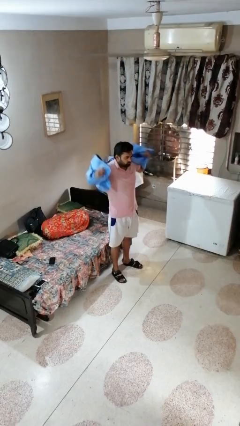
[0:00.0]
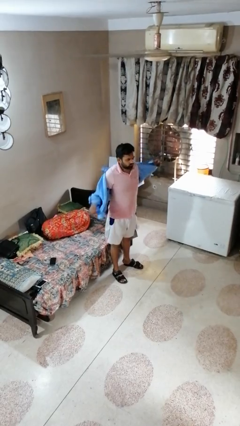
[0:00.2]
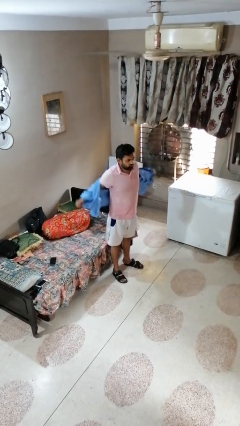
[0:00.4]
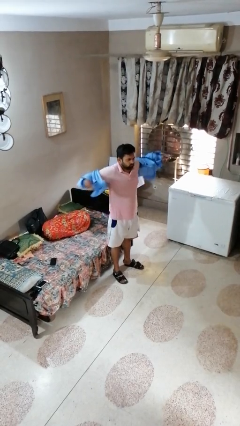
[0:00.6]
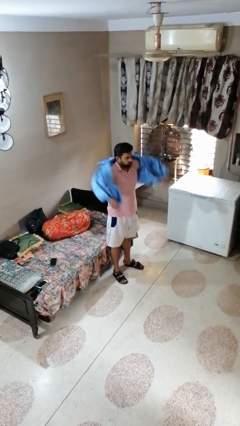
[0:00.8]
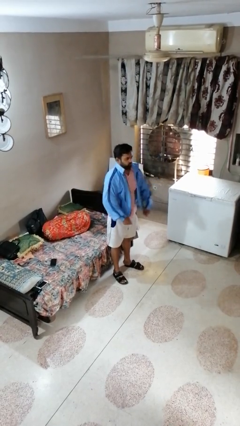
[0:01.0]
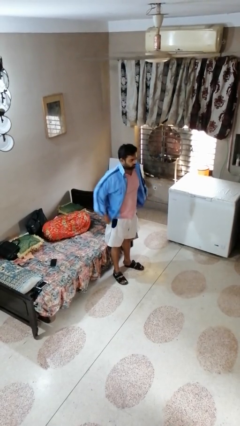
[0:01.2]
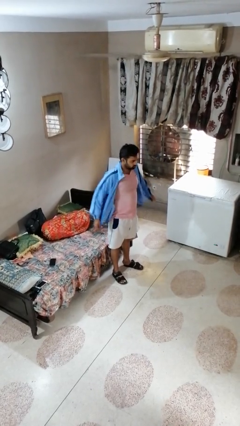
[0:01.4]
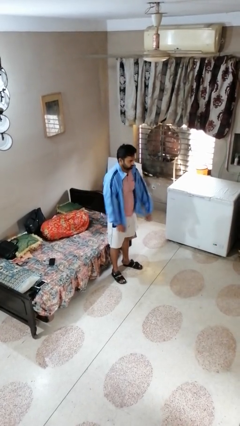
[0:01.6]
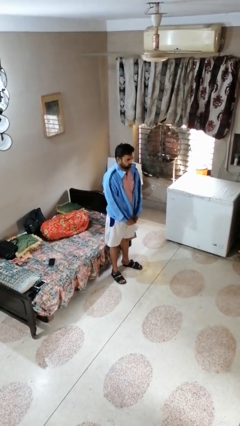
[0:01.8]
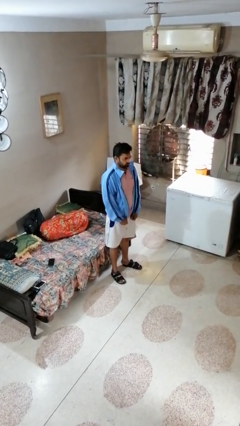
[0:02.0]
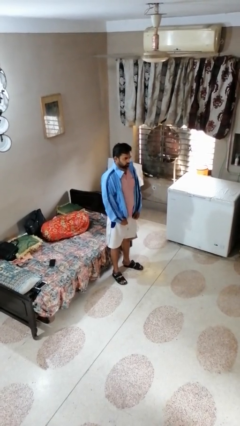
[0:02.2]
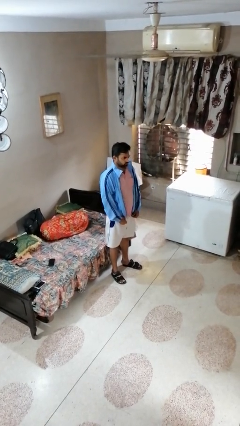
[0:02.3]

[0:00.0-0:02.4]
person puts on jacket

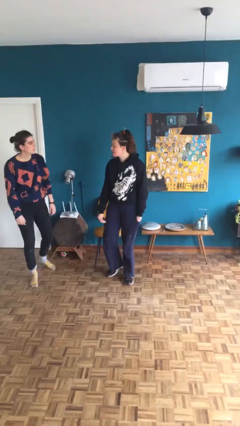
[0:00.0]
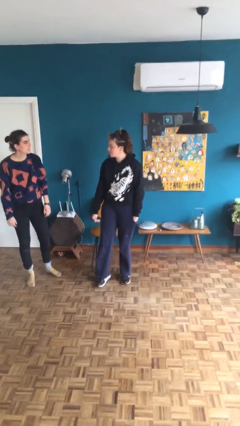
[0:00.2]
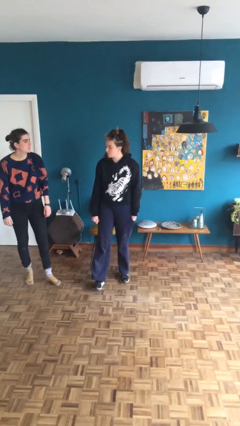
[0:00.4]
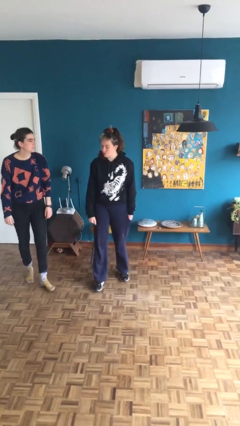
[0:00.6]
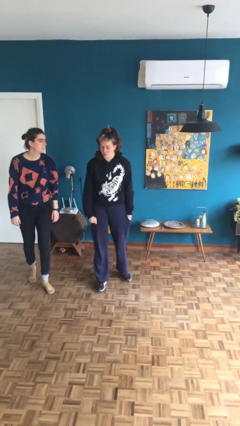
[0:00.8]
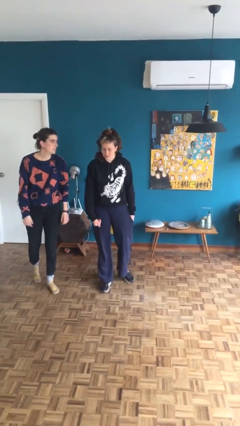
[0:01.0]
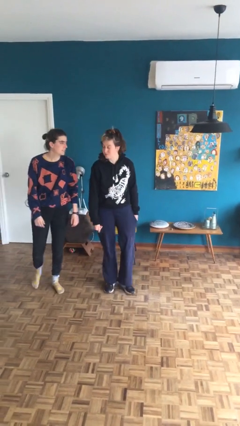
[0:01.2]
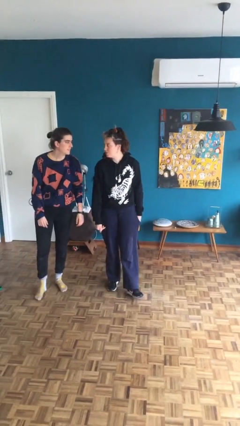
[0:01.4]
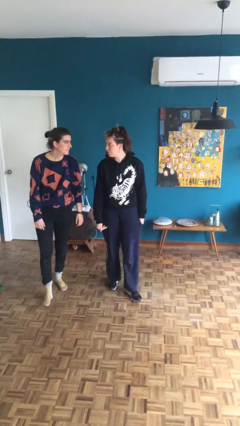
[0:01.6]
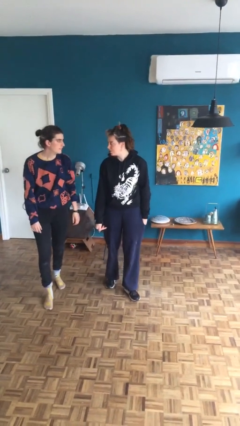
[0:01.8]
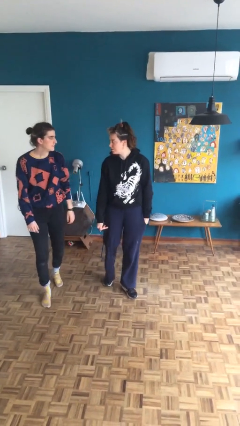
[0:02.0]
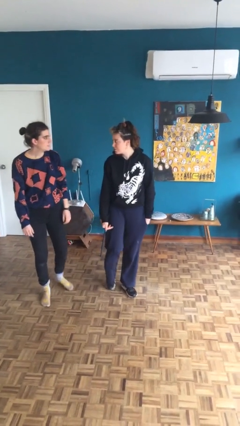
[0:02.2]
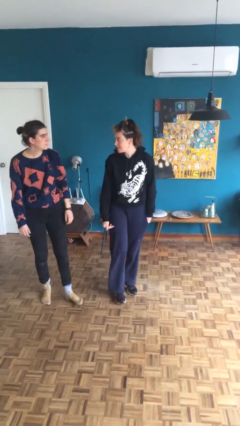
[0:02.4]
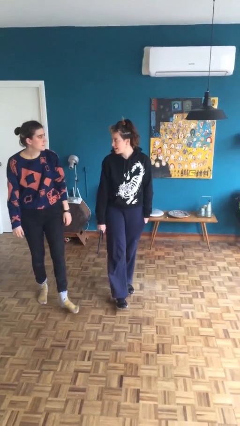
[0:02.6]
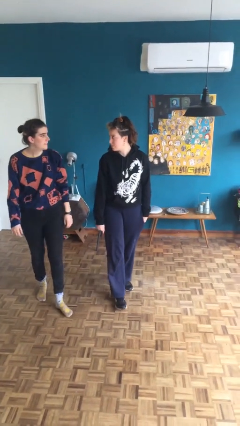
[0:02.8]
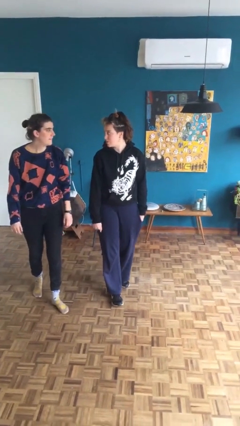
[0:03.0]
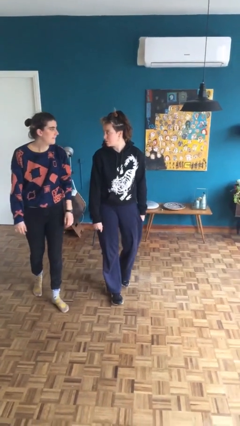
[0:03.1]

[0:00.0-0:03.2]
person talks to person

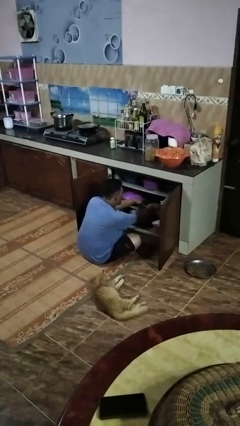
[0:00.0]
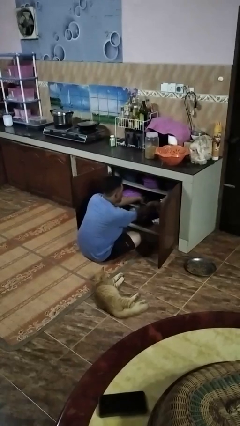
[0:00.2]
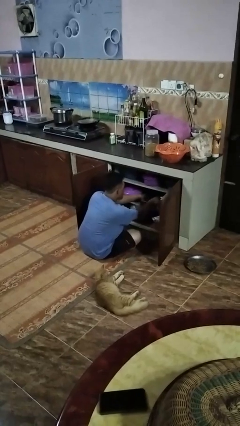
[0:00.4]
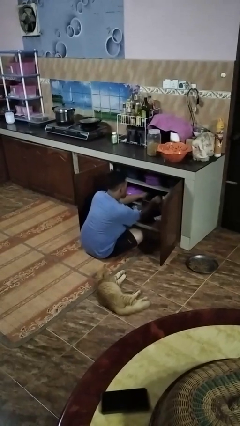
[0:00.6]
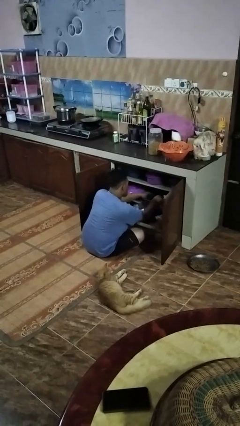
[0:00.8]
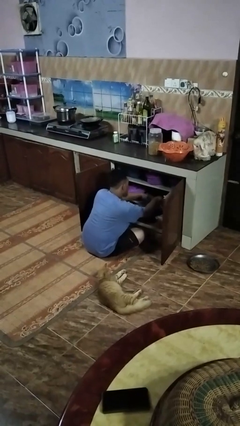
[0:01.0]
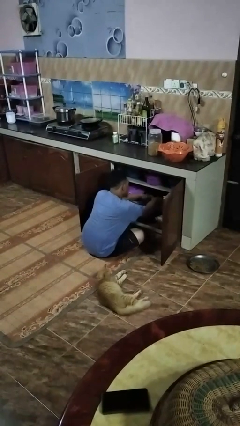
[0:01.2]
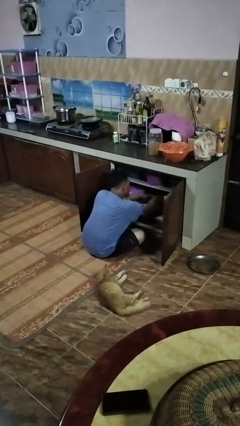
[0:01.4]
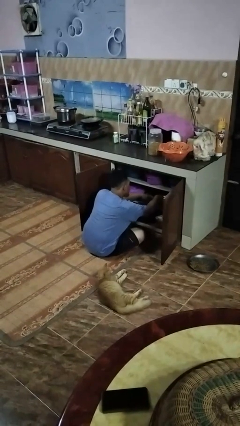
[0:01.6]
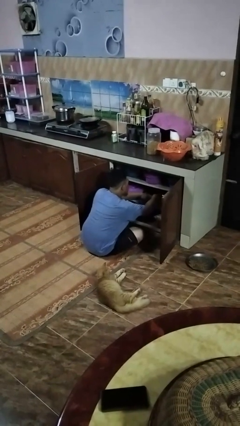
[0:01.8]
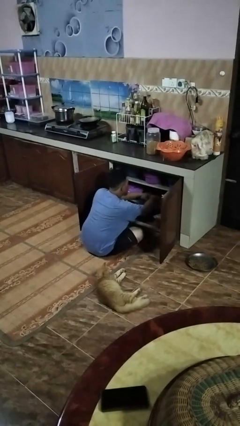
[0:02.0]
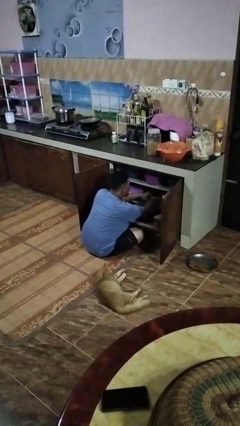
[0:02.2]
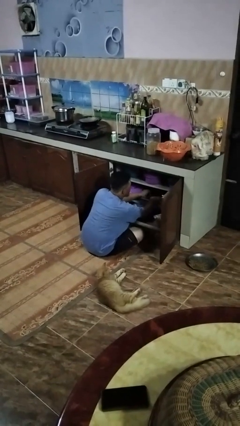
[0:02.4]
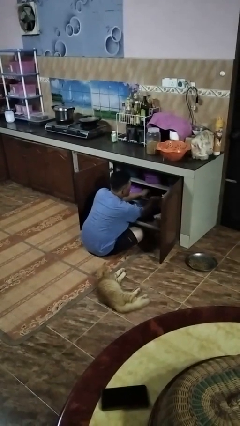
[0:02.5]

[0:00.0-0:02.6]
person searches in kitchen drawer

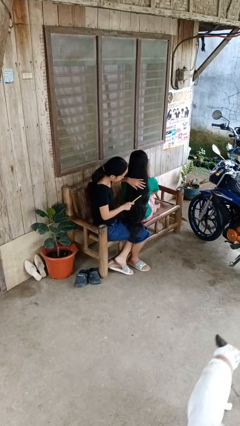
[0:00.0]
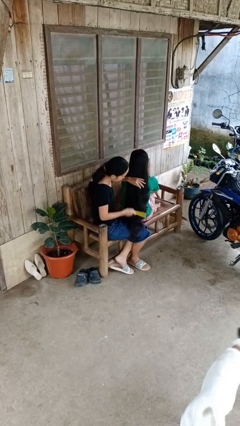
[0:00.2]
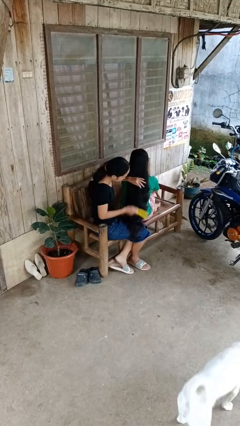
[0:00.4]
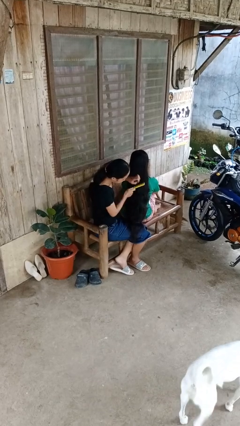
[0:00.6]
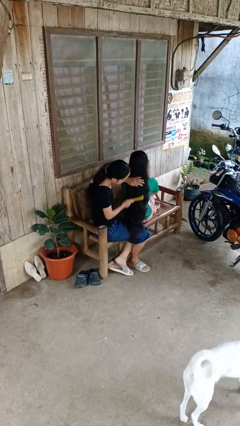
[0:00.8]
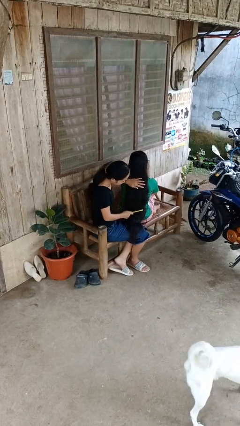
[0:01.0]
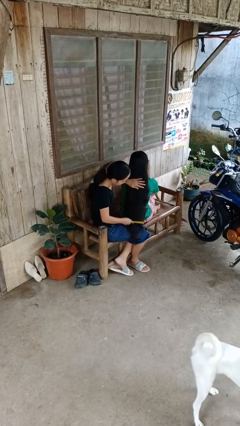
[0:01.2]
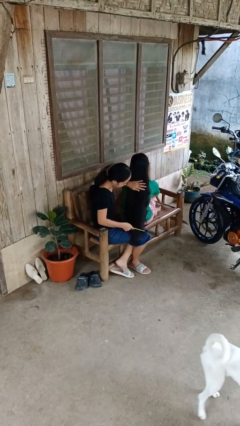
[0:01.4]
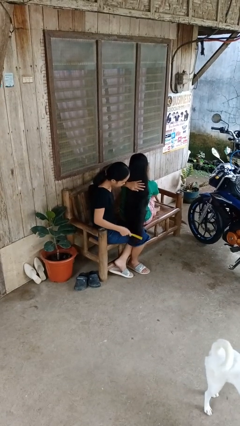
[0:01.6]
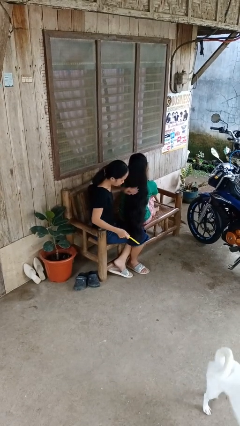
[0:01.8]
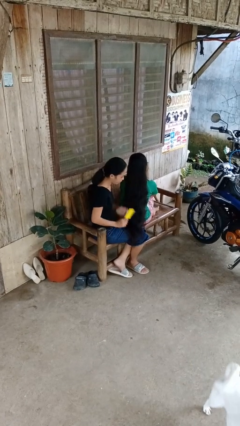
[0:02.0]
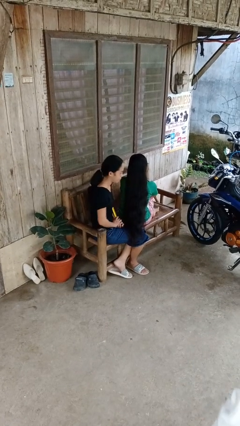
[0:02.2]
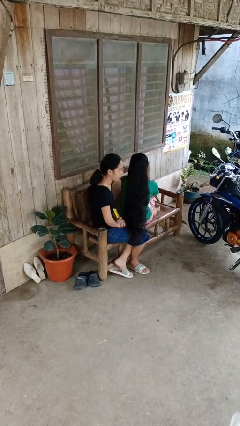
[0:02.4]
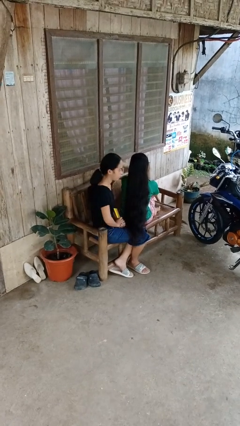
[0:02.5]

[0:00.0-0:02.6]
person brushes hair of person

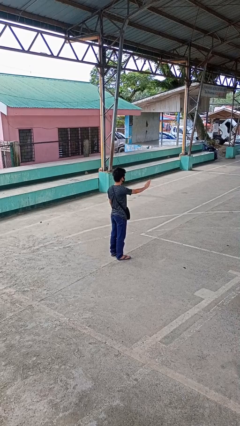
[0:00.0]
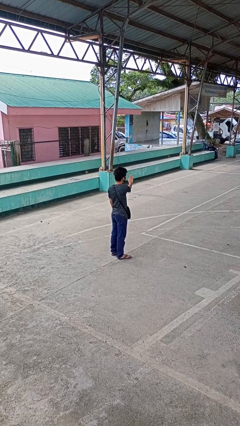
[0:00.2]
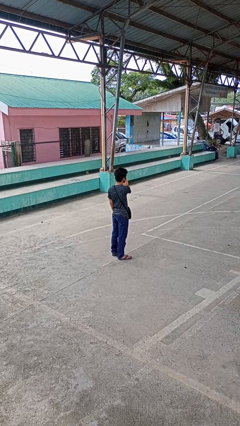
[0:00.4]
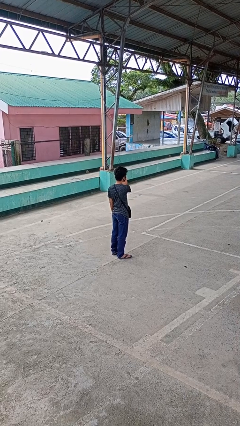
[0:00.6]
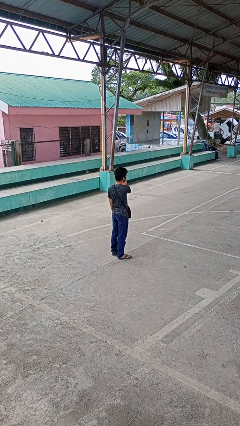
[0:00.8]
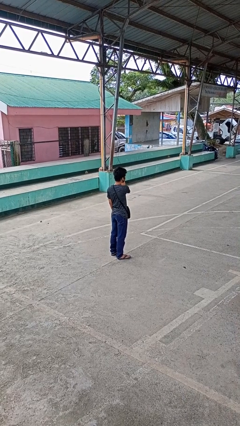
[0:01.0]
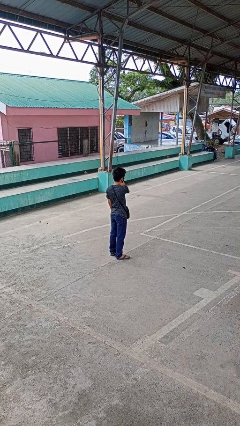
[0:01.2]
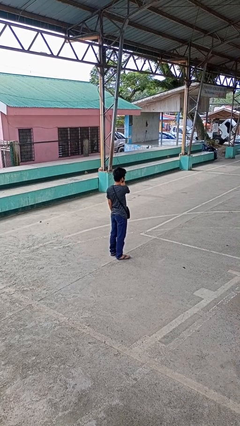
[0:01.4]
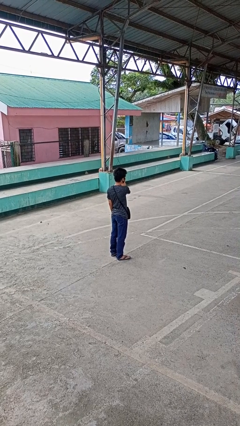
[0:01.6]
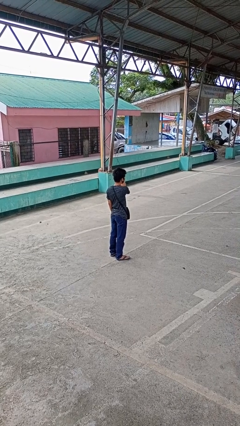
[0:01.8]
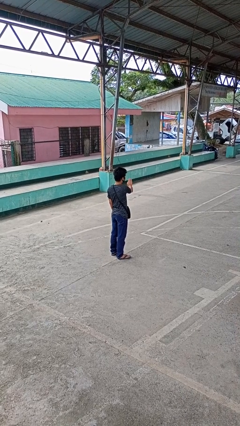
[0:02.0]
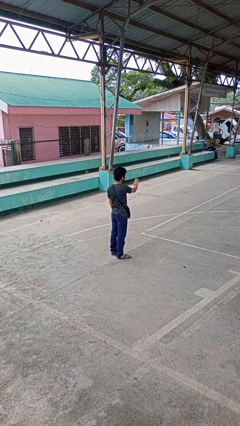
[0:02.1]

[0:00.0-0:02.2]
person gestures swipe left

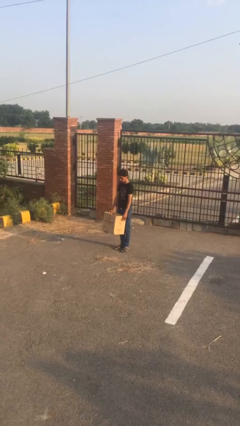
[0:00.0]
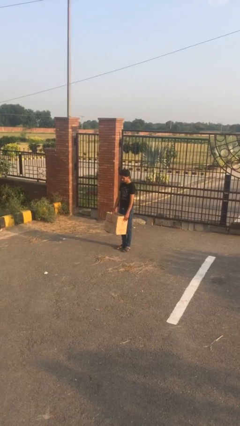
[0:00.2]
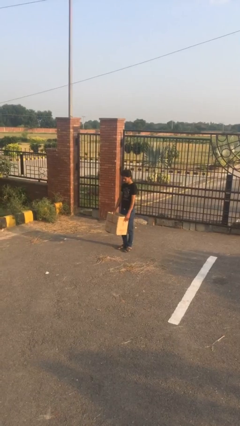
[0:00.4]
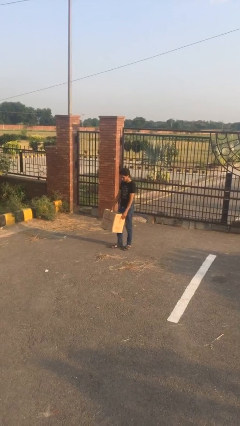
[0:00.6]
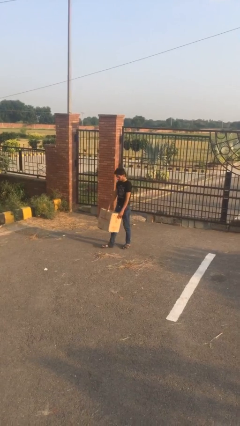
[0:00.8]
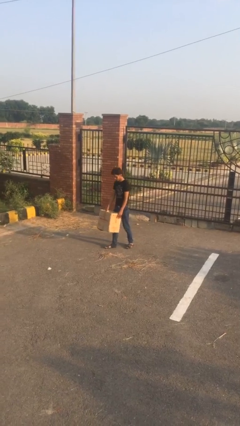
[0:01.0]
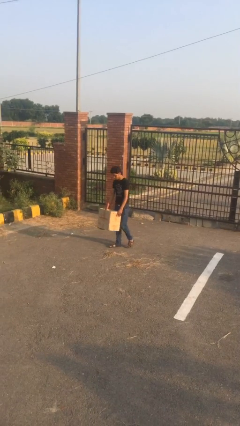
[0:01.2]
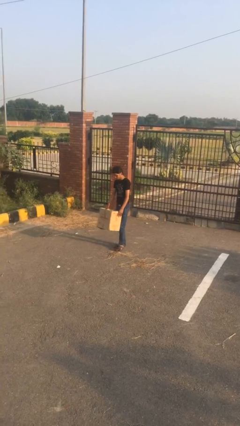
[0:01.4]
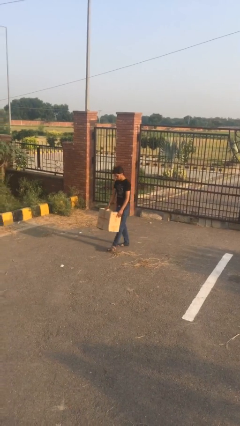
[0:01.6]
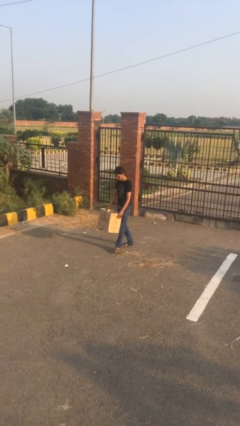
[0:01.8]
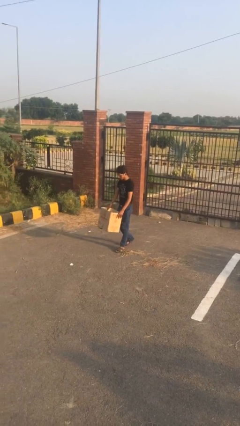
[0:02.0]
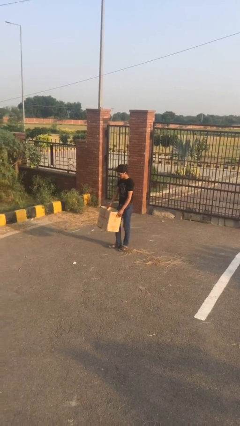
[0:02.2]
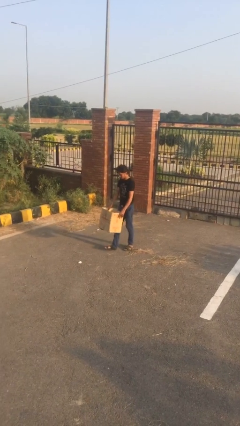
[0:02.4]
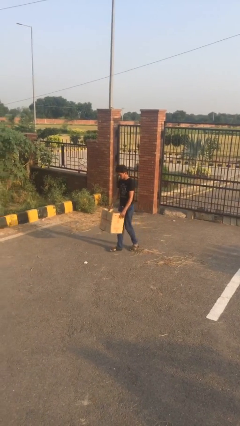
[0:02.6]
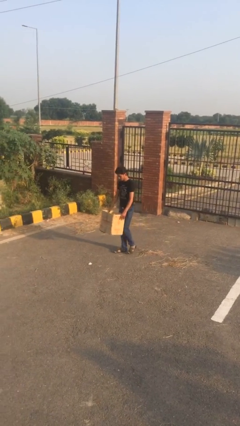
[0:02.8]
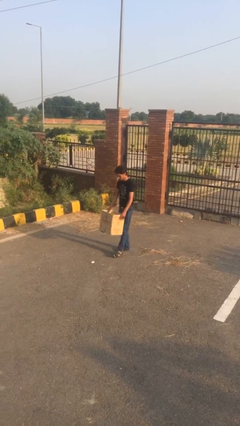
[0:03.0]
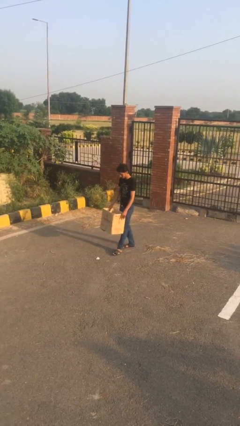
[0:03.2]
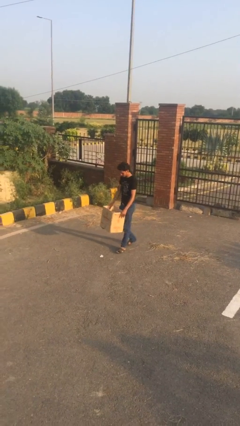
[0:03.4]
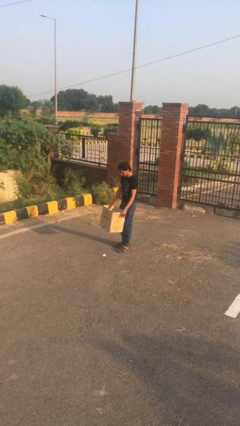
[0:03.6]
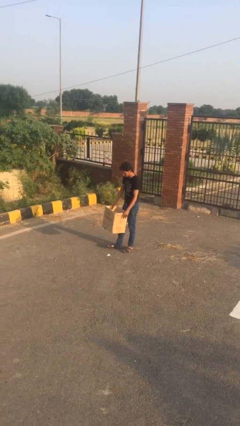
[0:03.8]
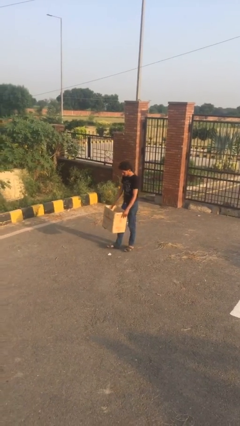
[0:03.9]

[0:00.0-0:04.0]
person carries heavy object

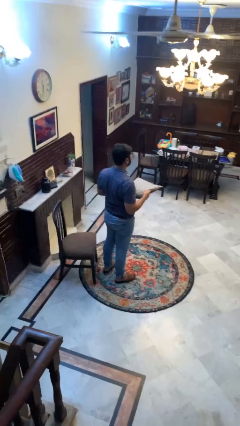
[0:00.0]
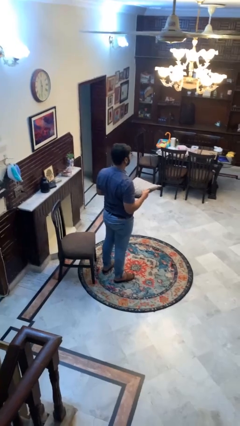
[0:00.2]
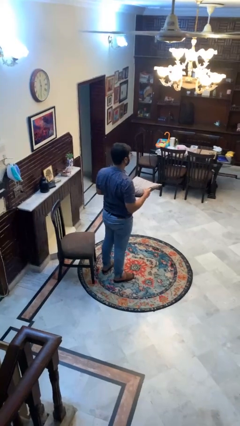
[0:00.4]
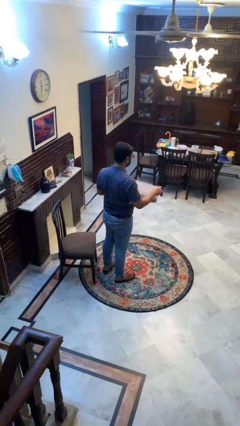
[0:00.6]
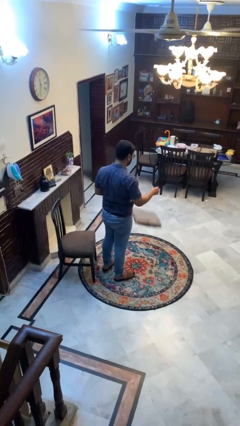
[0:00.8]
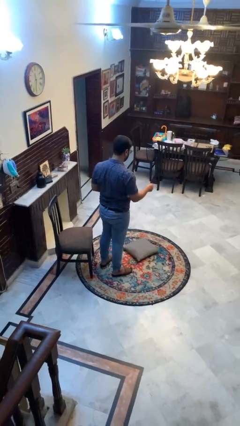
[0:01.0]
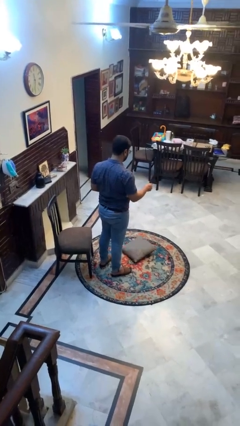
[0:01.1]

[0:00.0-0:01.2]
person drops object
